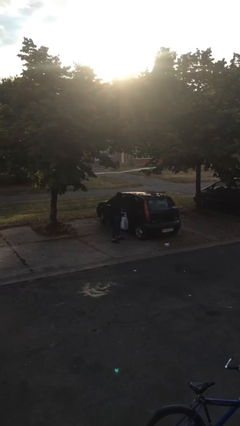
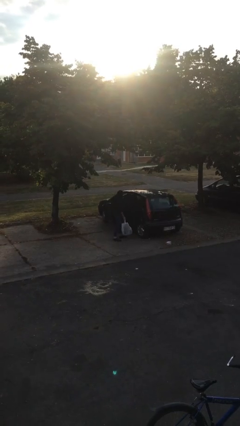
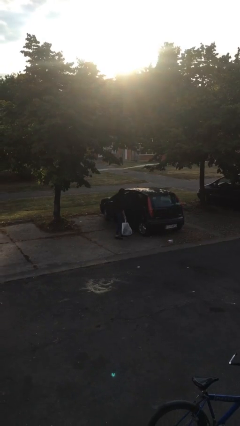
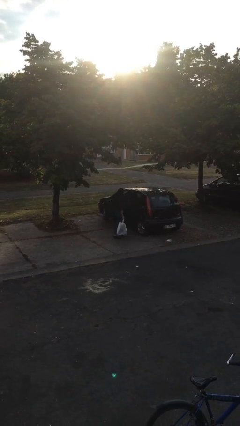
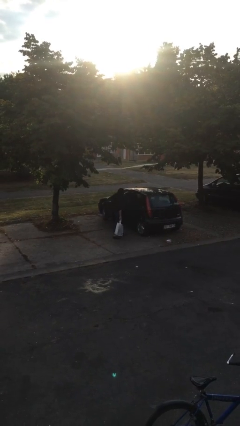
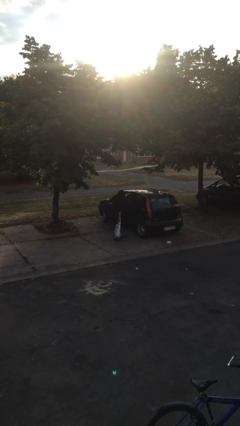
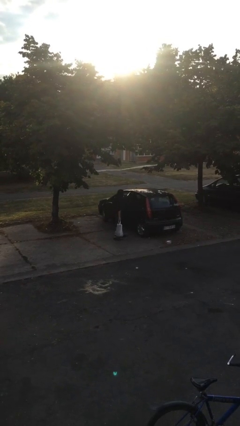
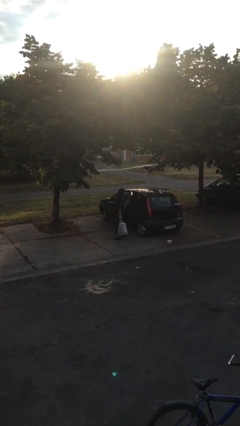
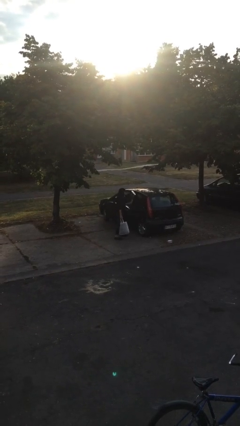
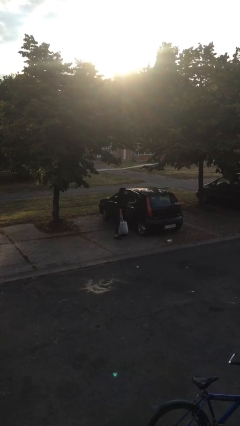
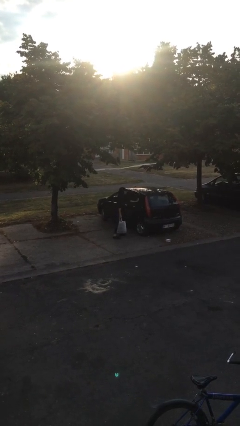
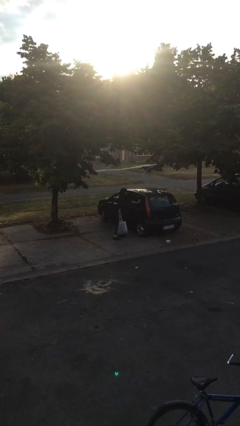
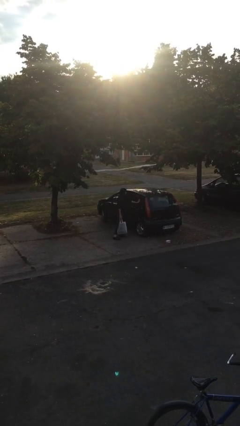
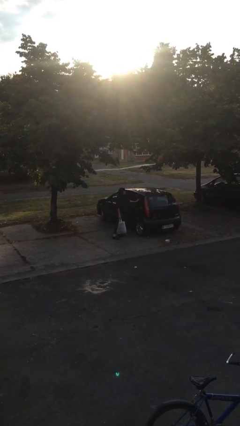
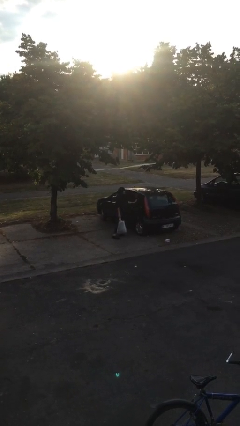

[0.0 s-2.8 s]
person closes car door

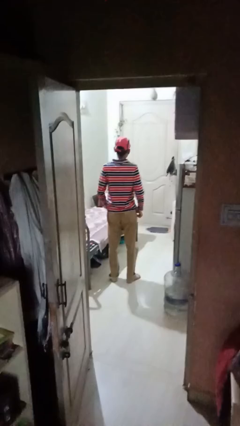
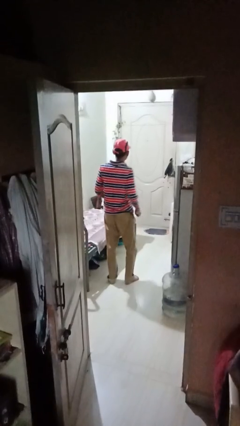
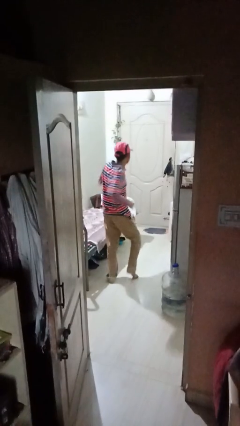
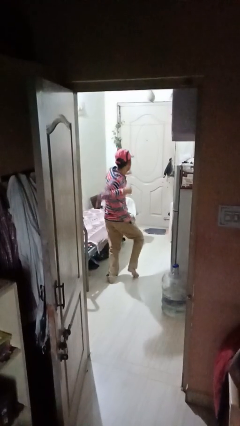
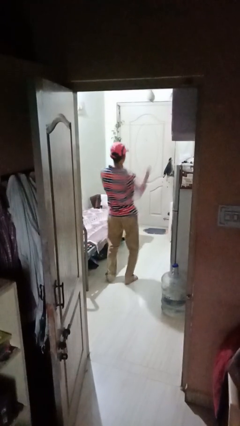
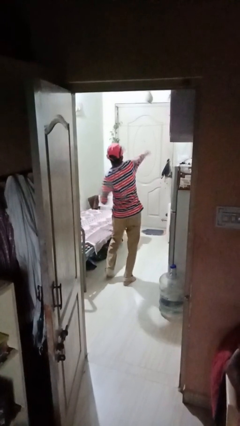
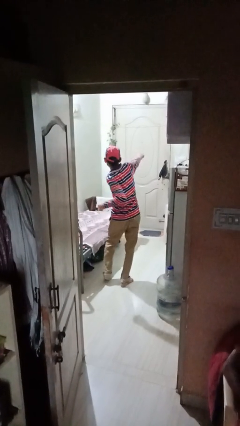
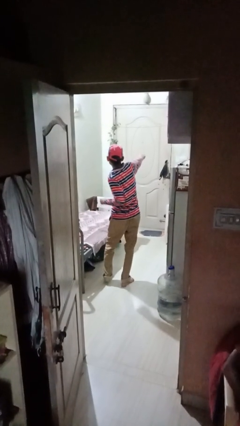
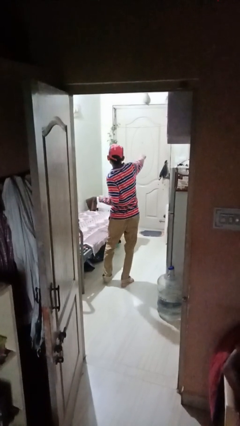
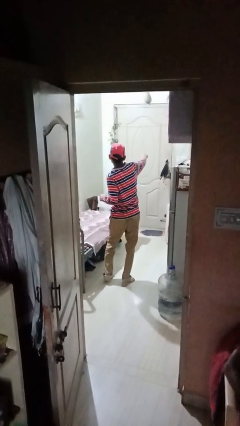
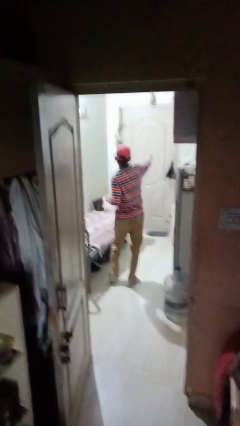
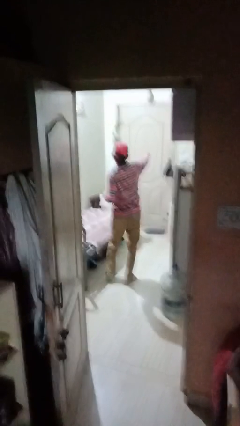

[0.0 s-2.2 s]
person punches

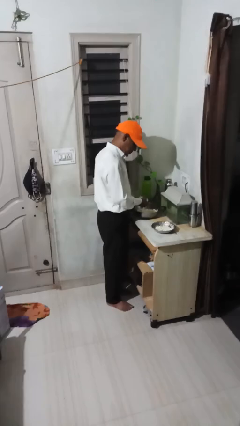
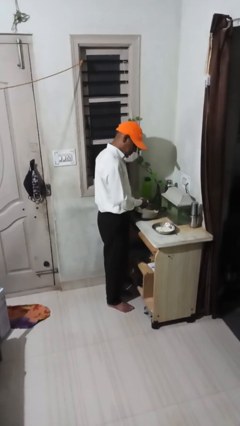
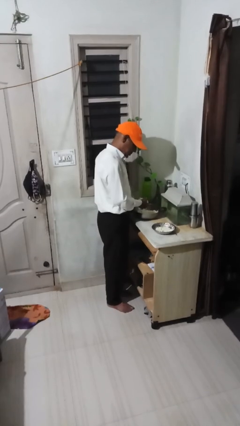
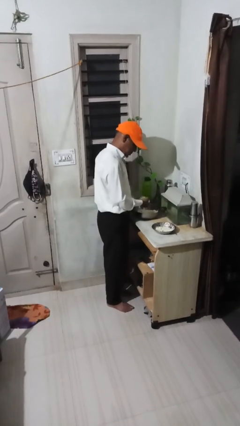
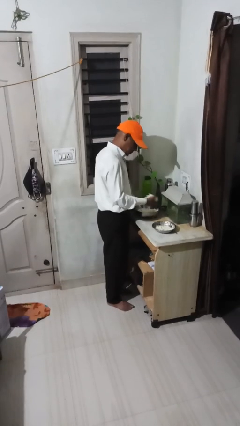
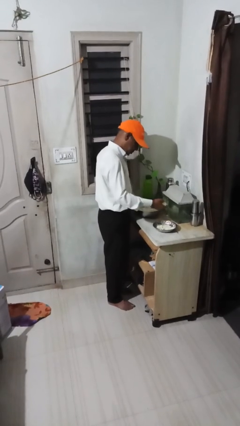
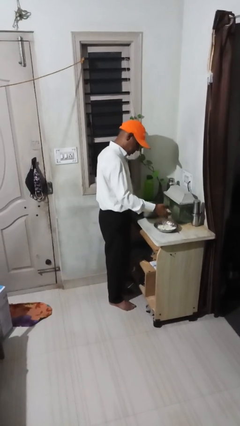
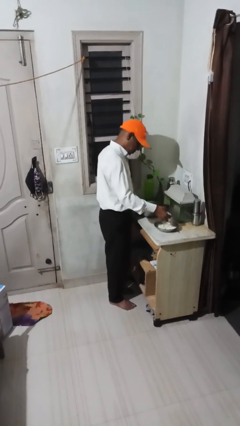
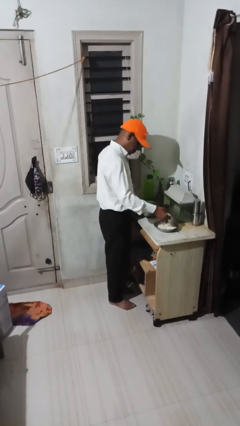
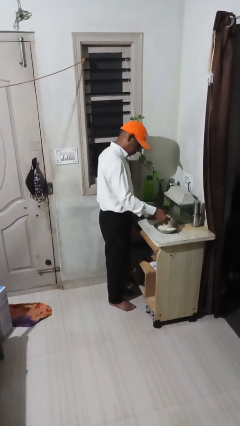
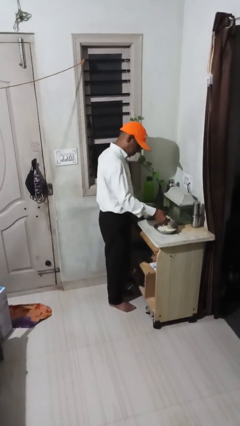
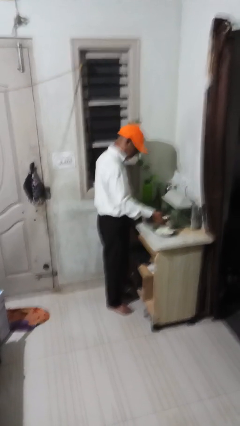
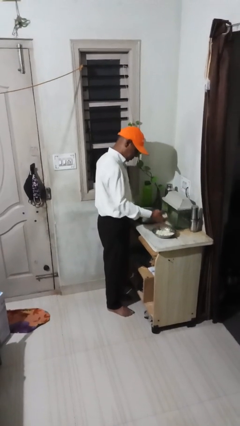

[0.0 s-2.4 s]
person pours into bowl

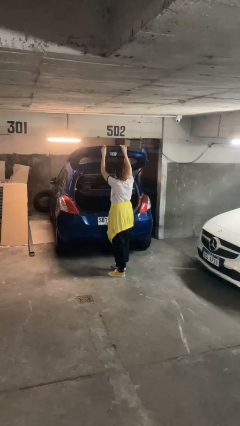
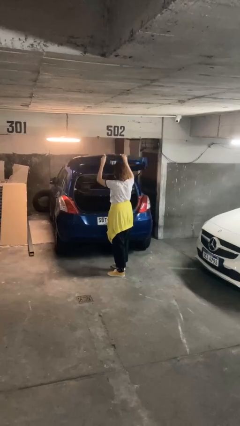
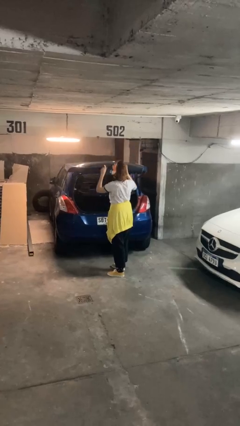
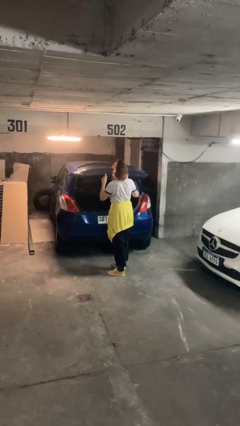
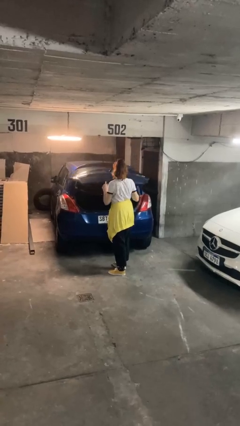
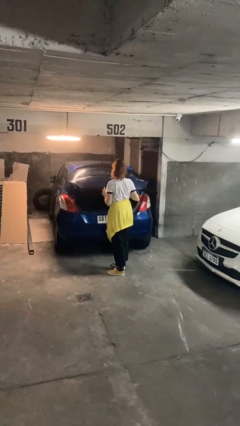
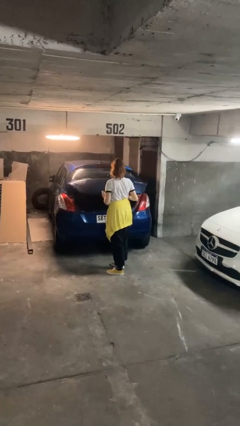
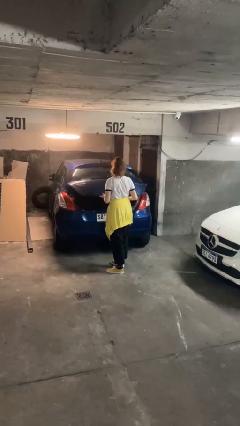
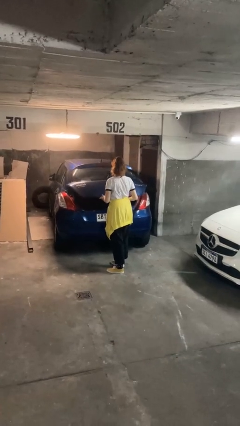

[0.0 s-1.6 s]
person closes car trunk

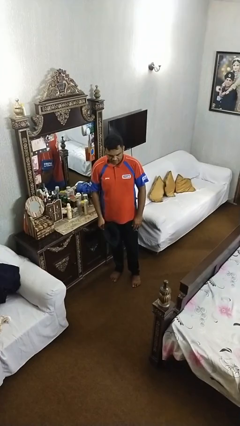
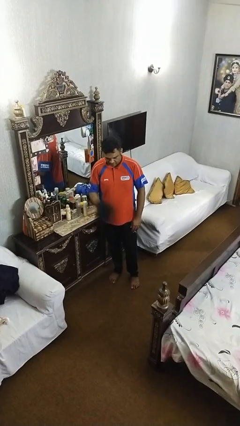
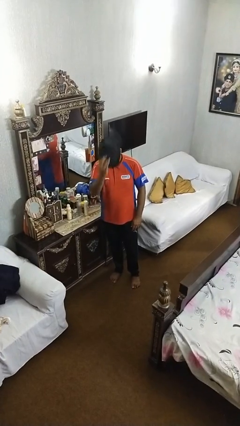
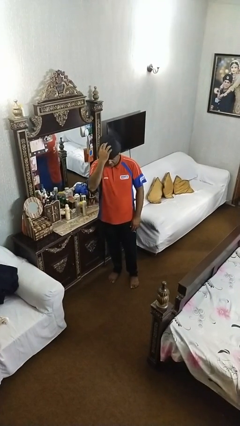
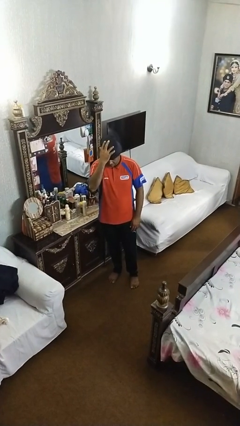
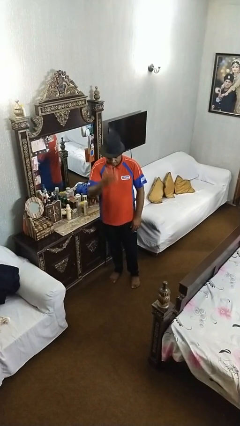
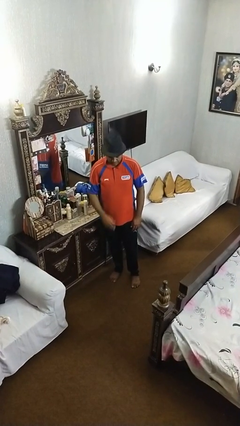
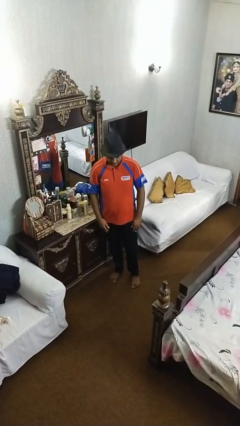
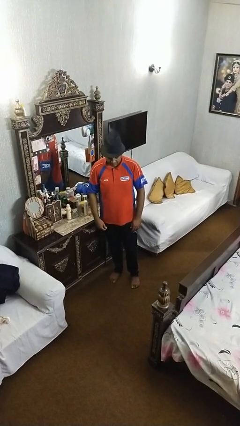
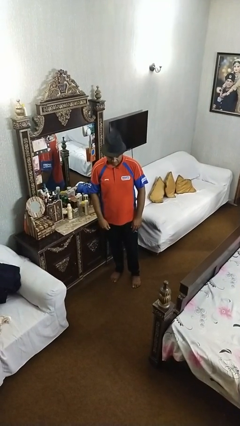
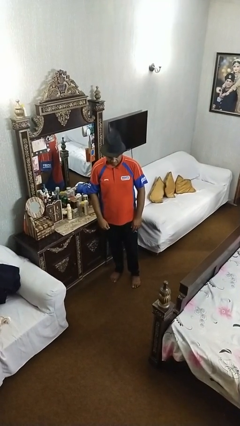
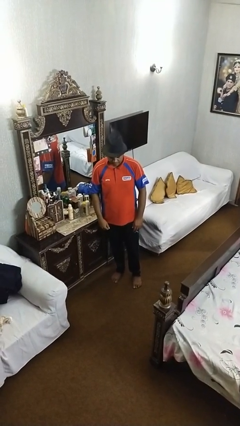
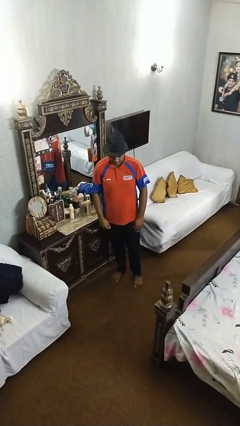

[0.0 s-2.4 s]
person puts on hat

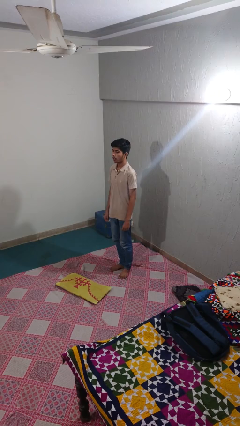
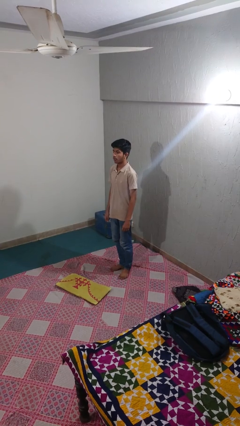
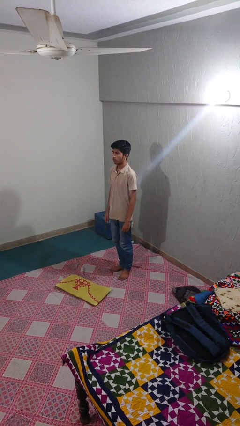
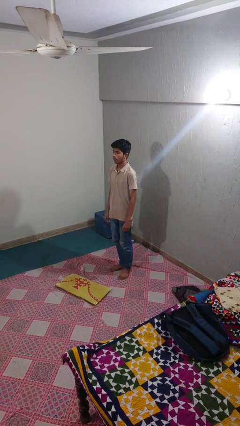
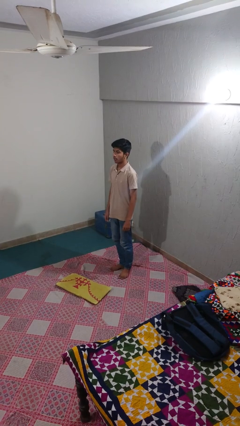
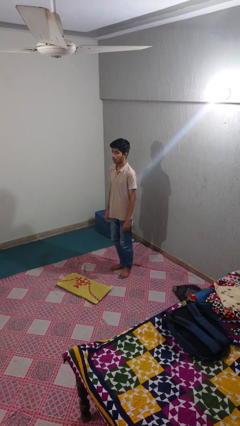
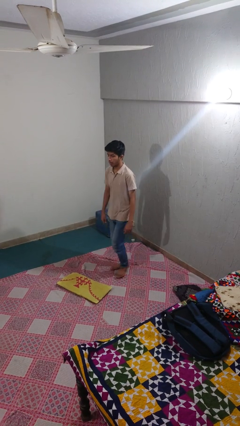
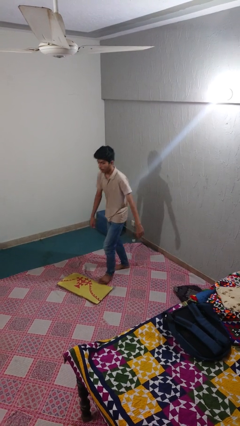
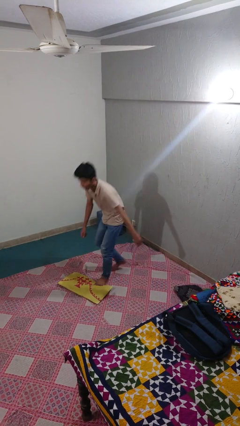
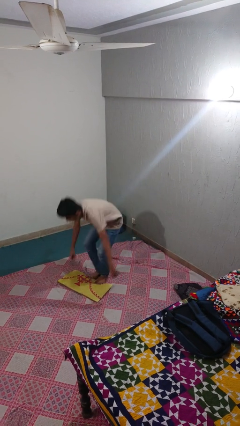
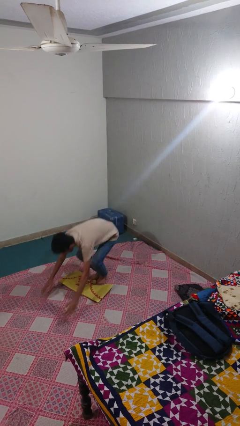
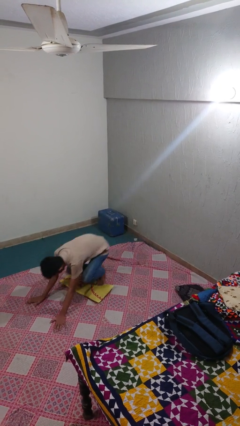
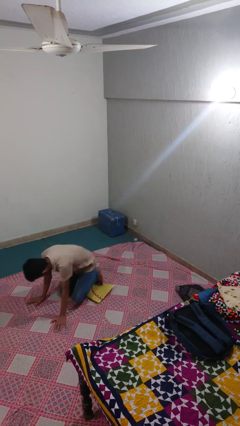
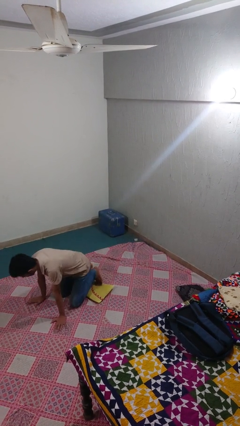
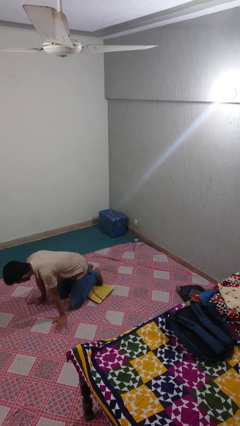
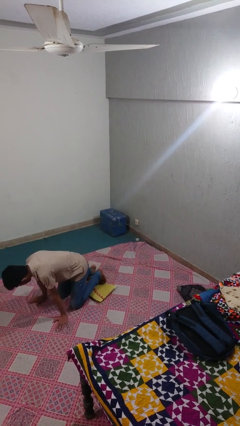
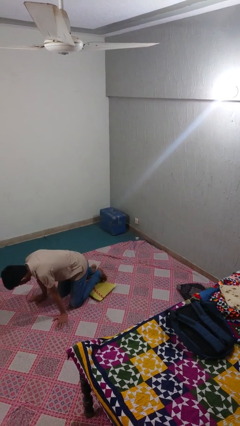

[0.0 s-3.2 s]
person trips on object on floor

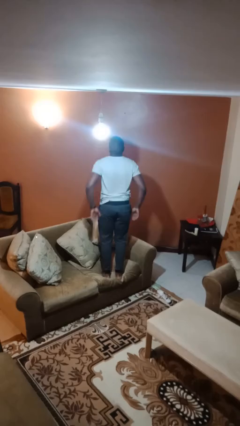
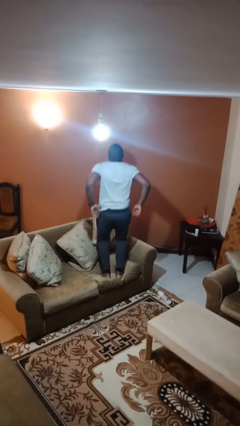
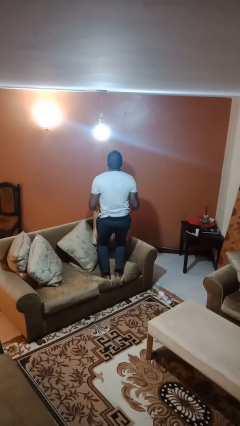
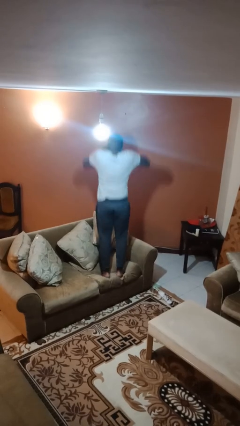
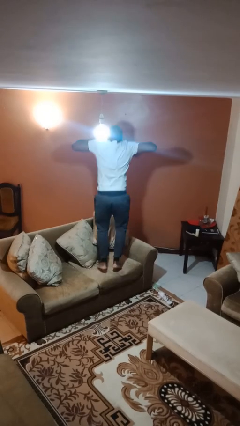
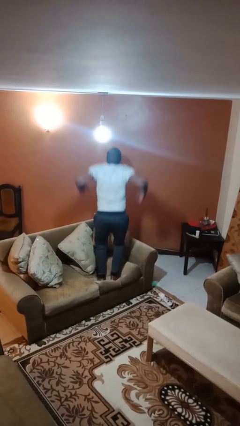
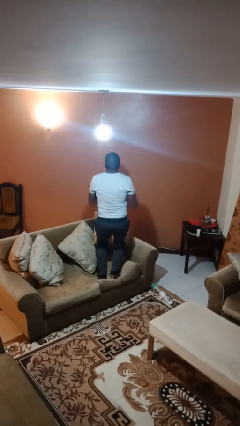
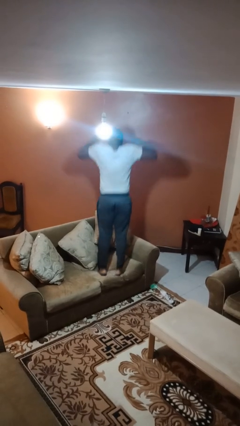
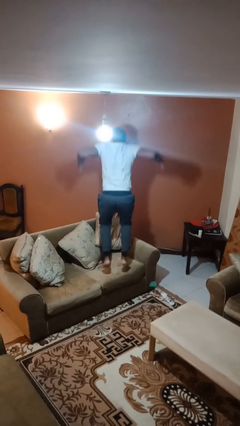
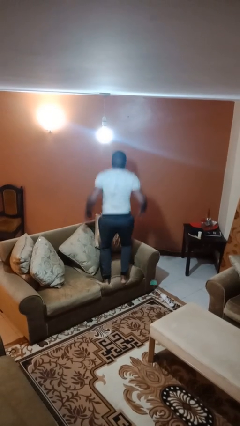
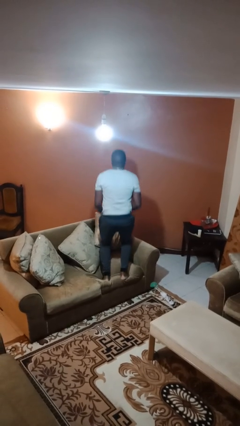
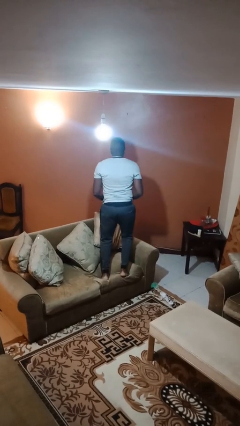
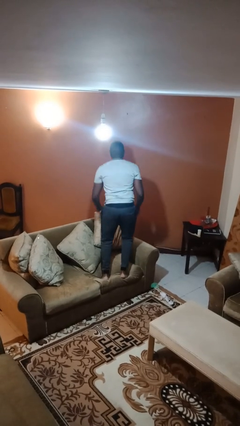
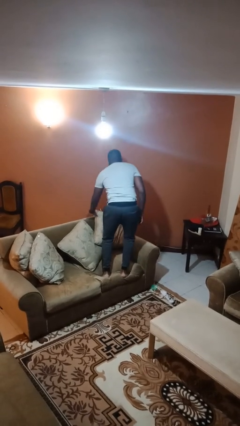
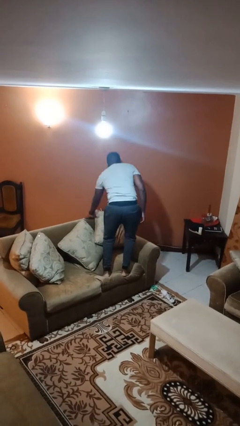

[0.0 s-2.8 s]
person jumps on couch
